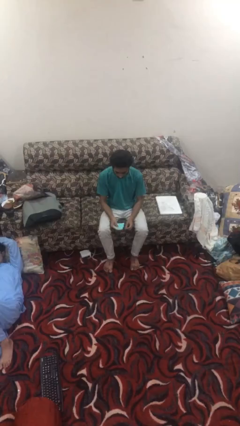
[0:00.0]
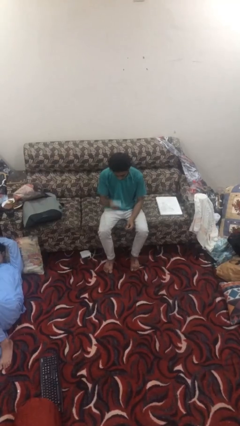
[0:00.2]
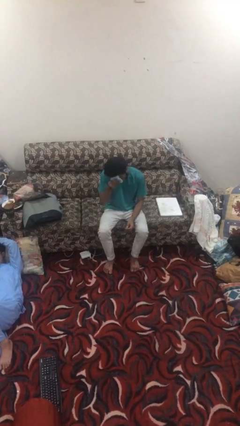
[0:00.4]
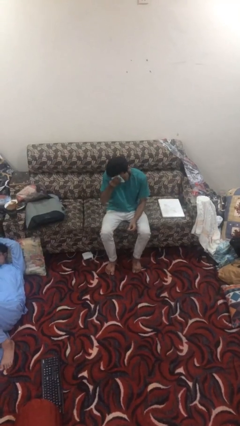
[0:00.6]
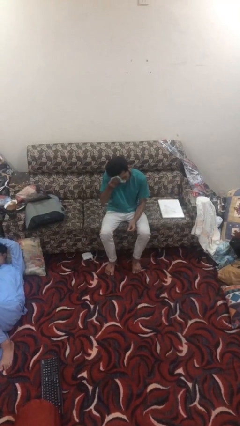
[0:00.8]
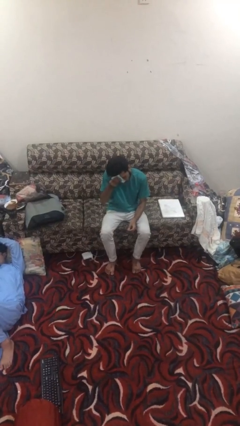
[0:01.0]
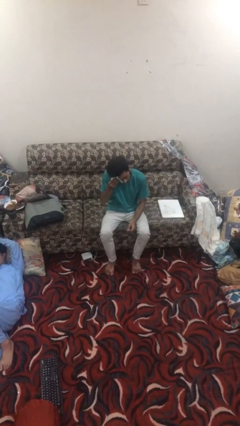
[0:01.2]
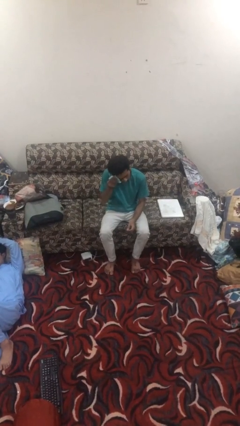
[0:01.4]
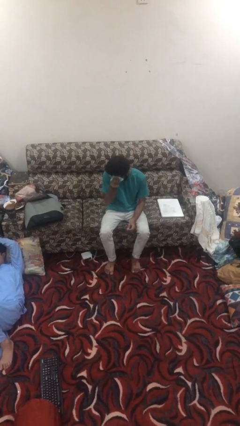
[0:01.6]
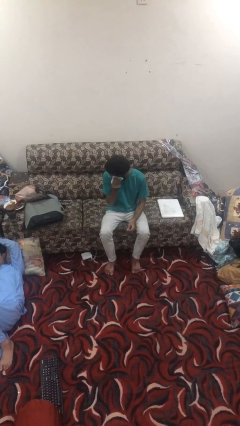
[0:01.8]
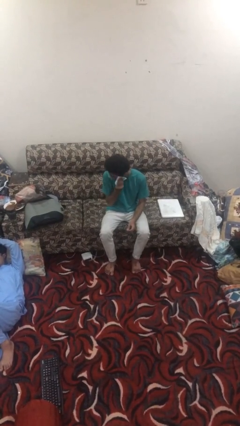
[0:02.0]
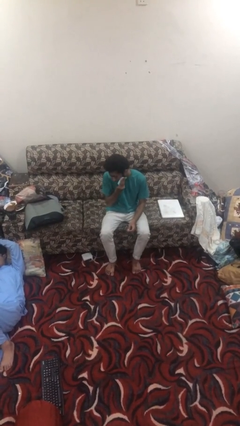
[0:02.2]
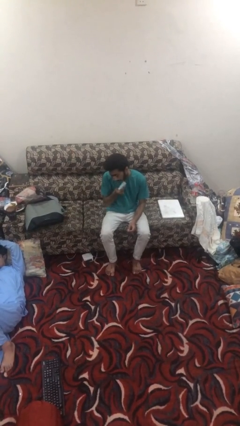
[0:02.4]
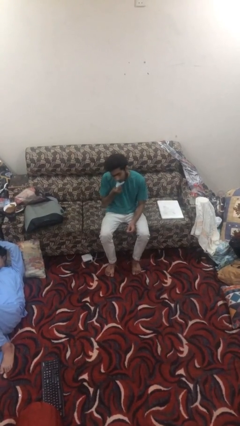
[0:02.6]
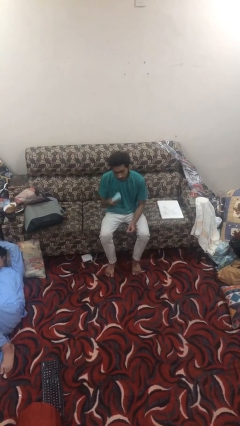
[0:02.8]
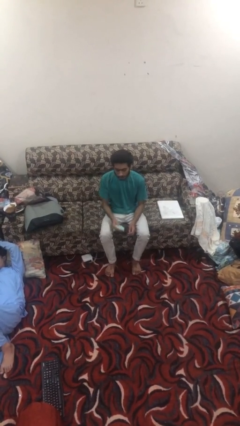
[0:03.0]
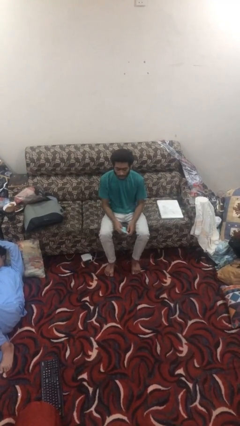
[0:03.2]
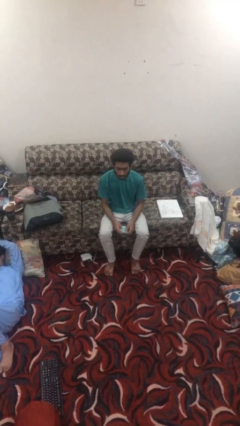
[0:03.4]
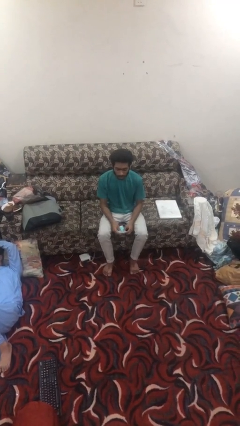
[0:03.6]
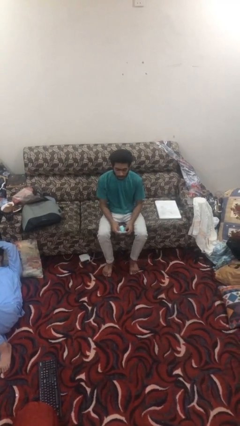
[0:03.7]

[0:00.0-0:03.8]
person wipes mouth with napkin

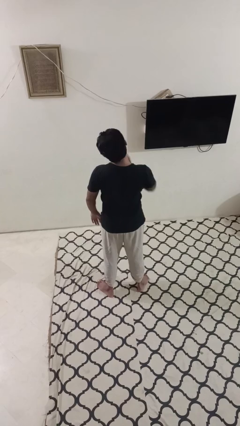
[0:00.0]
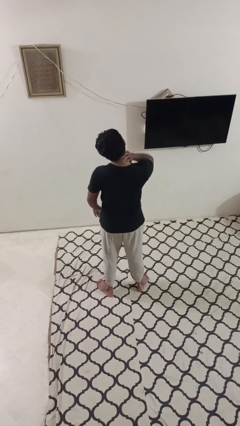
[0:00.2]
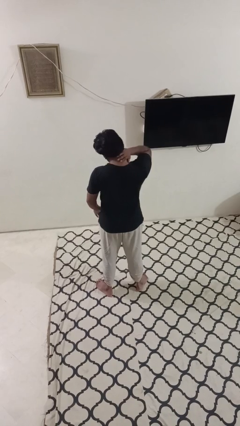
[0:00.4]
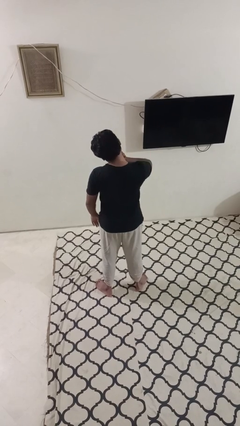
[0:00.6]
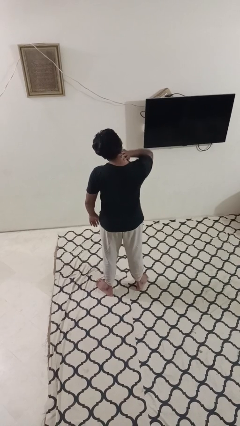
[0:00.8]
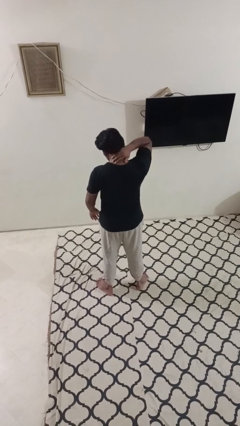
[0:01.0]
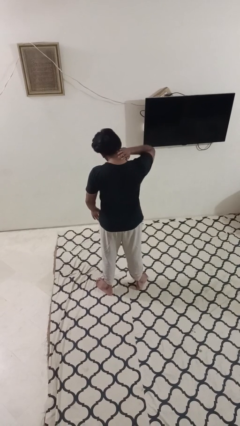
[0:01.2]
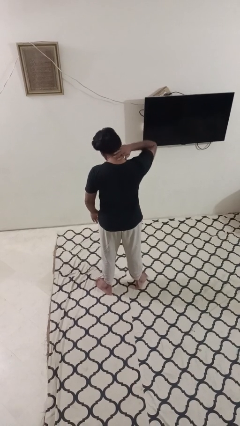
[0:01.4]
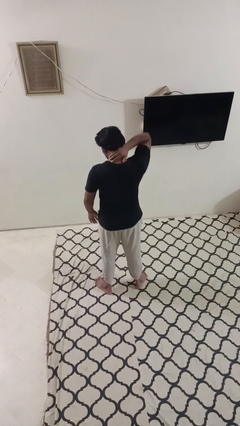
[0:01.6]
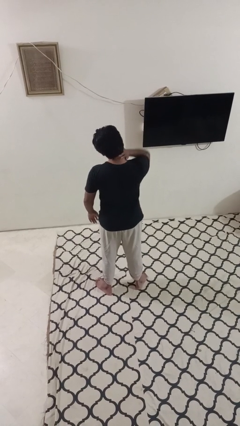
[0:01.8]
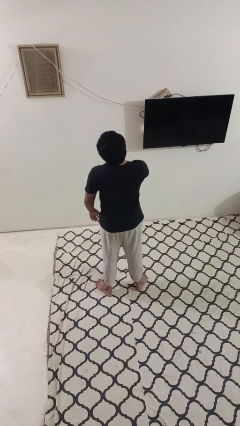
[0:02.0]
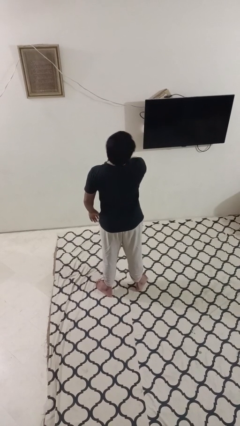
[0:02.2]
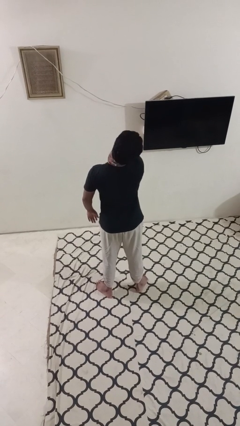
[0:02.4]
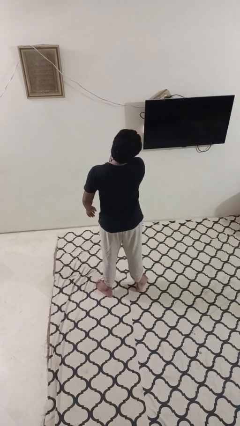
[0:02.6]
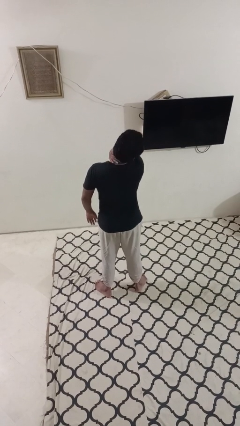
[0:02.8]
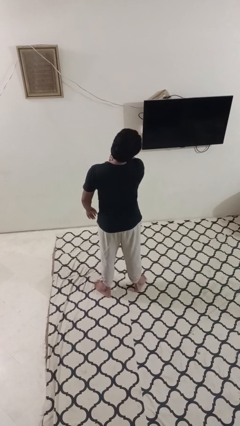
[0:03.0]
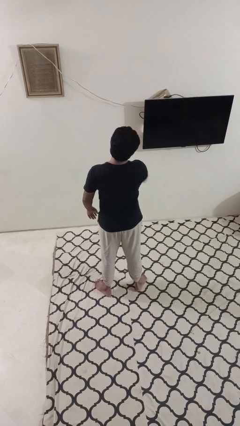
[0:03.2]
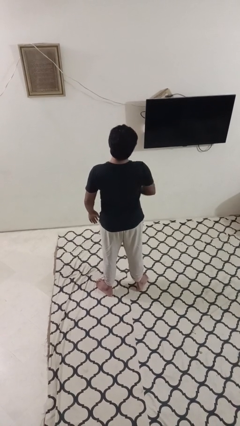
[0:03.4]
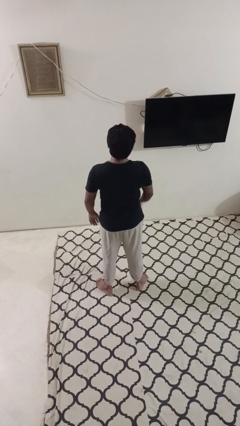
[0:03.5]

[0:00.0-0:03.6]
person rubs neck

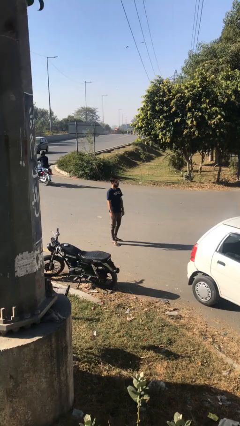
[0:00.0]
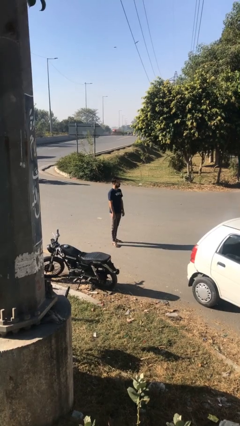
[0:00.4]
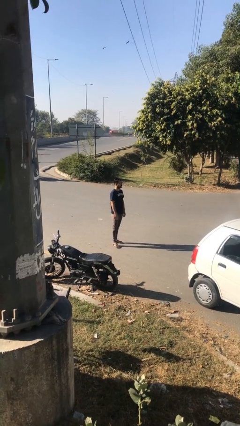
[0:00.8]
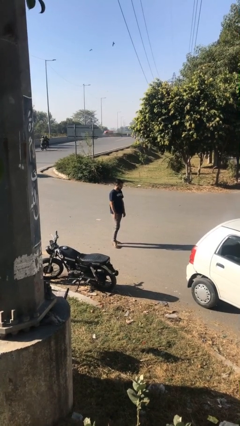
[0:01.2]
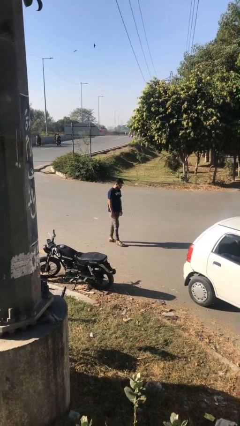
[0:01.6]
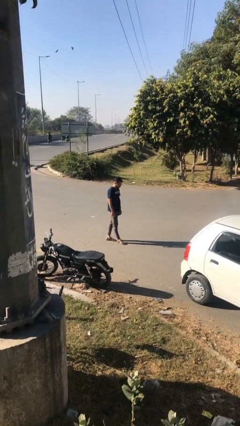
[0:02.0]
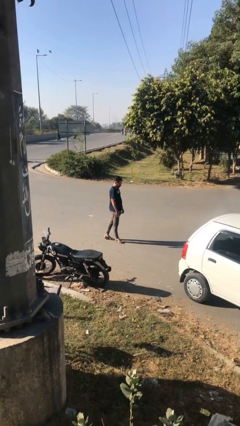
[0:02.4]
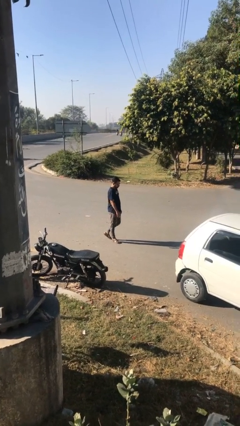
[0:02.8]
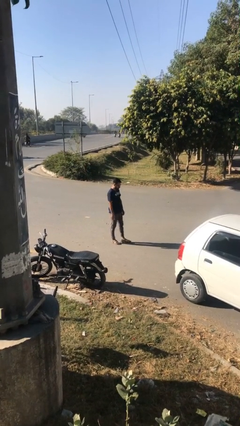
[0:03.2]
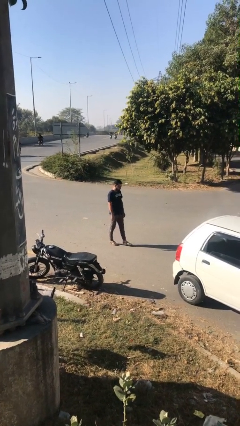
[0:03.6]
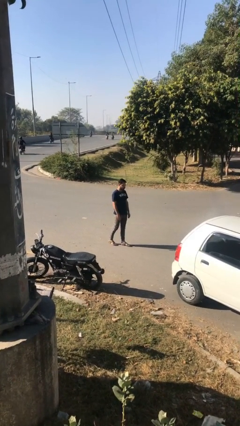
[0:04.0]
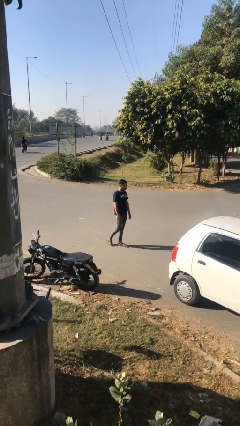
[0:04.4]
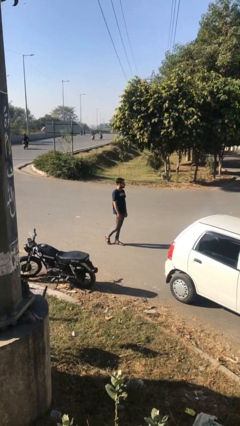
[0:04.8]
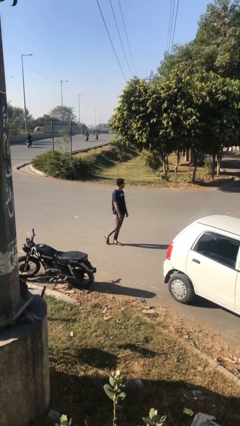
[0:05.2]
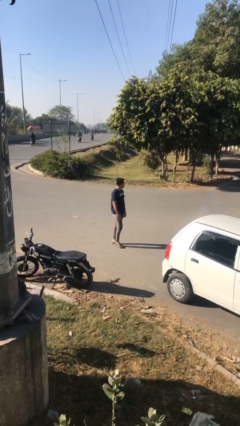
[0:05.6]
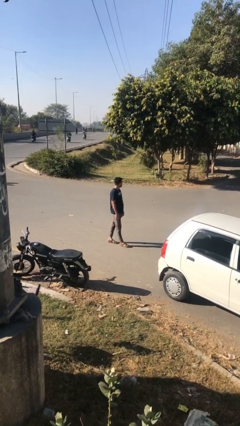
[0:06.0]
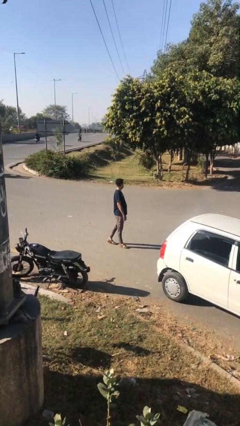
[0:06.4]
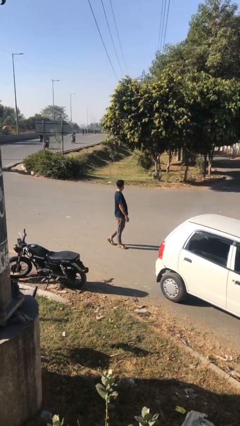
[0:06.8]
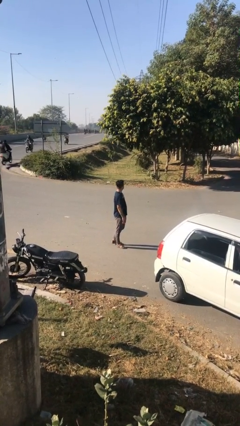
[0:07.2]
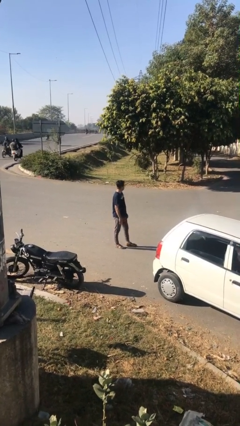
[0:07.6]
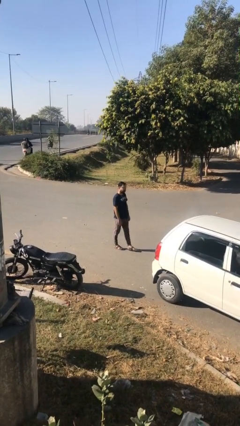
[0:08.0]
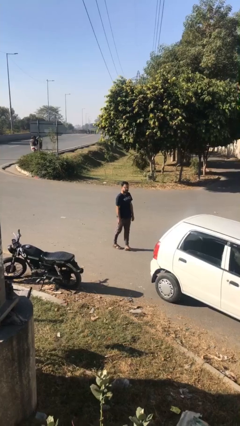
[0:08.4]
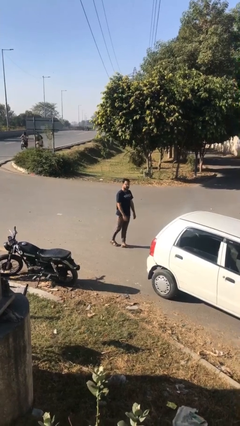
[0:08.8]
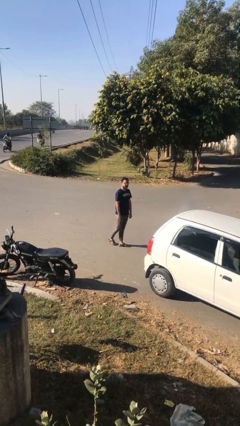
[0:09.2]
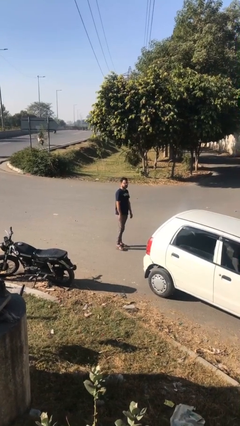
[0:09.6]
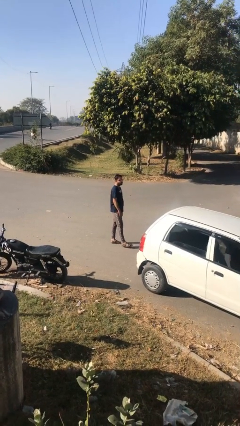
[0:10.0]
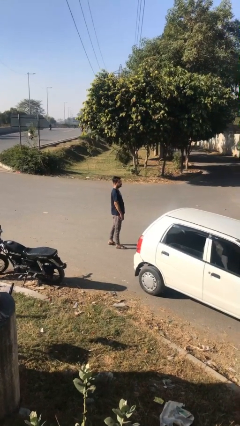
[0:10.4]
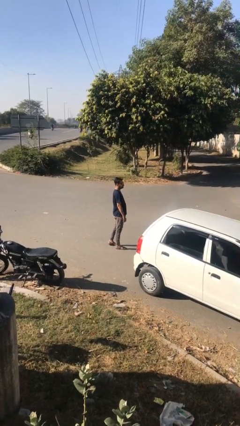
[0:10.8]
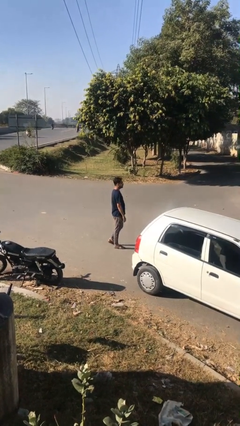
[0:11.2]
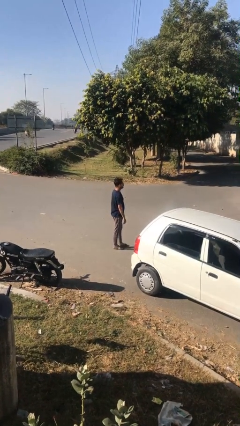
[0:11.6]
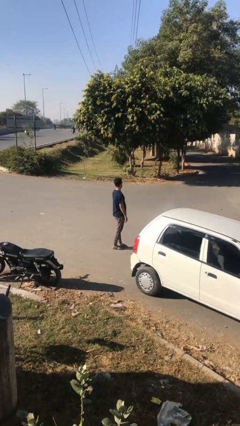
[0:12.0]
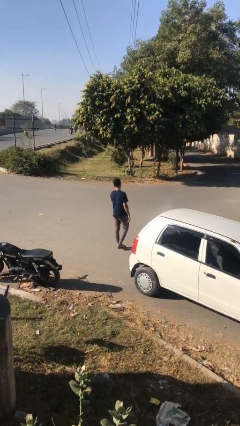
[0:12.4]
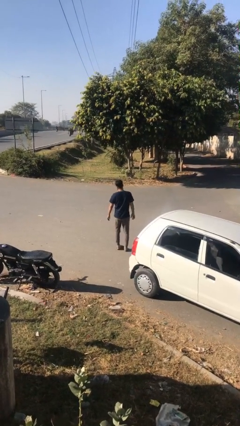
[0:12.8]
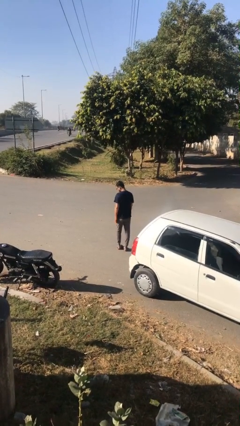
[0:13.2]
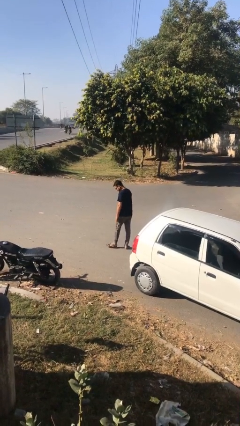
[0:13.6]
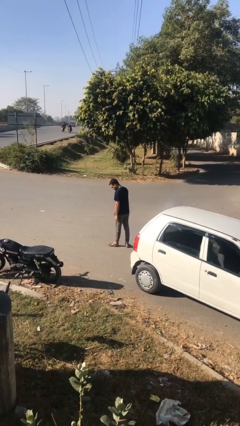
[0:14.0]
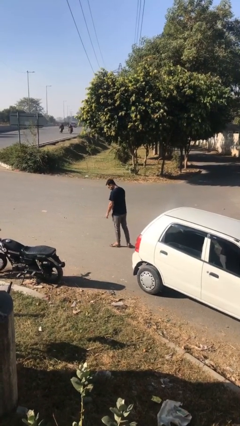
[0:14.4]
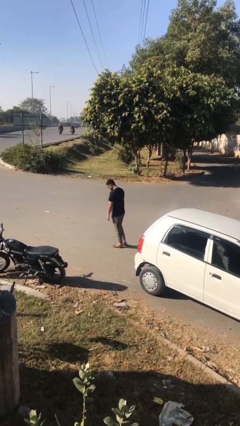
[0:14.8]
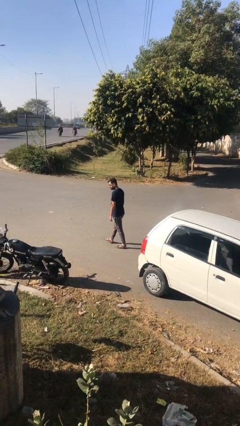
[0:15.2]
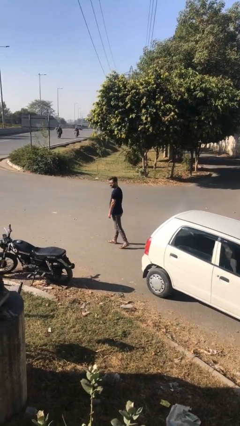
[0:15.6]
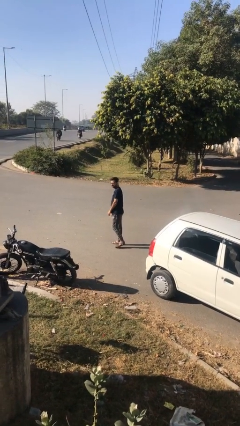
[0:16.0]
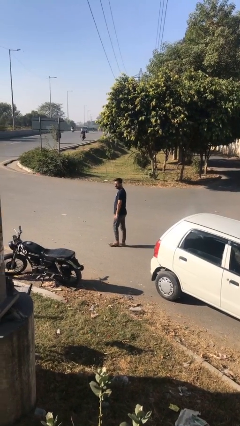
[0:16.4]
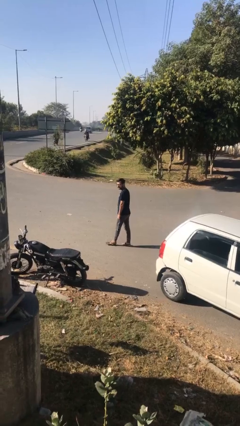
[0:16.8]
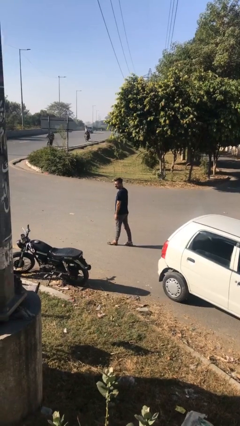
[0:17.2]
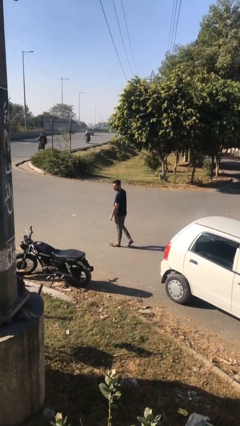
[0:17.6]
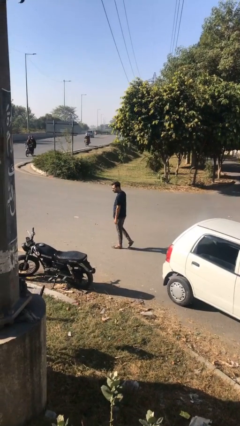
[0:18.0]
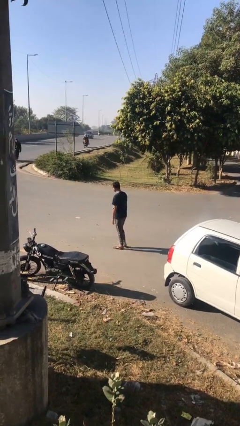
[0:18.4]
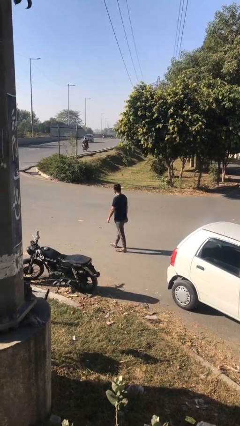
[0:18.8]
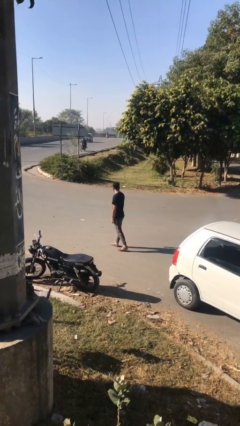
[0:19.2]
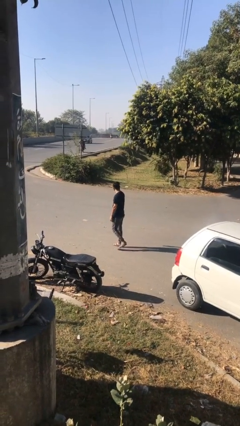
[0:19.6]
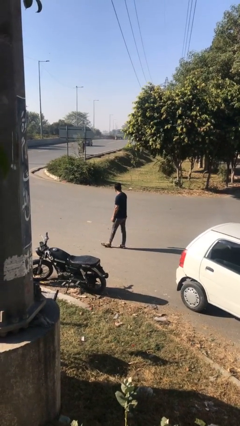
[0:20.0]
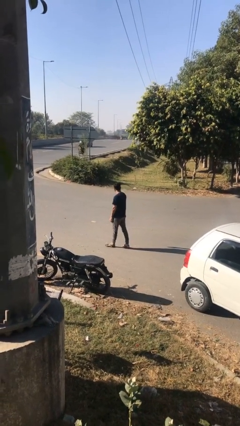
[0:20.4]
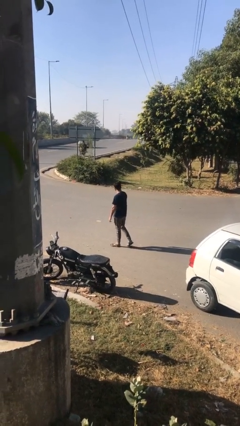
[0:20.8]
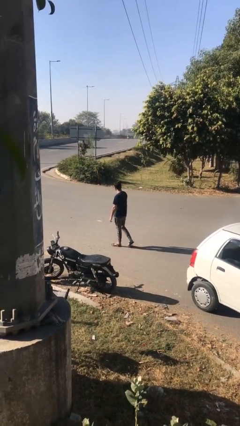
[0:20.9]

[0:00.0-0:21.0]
person walks
